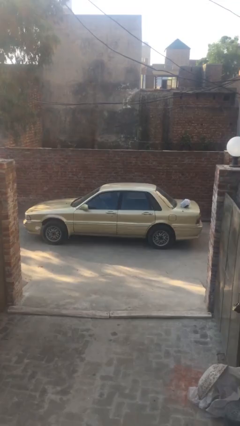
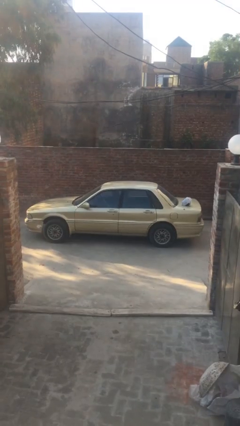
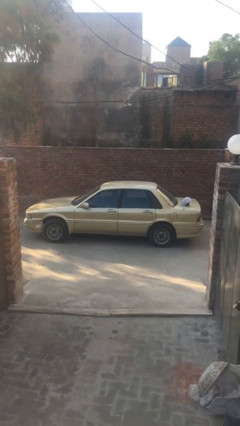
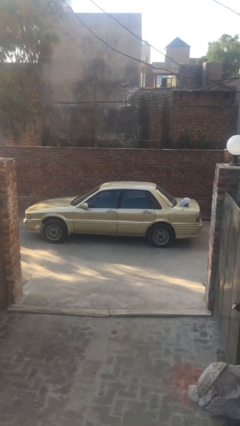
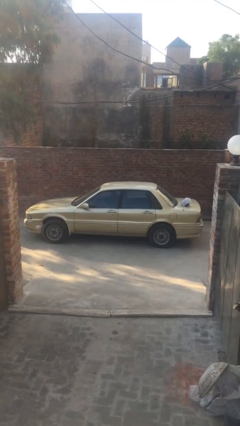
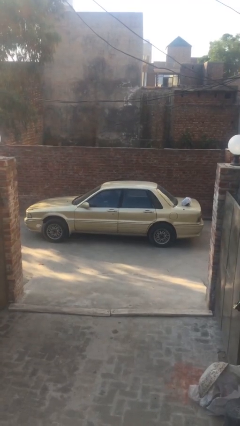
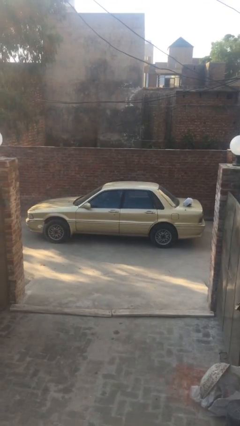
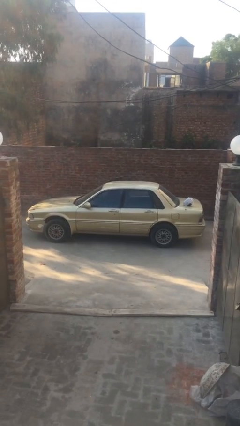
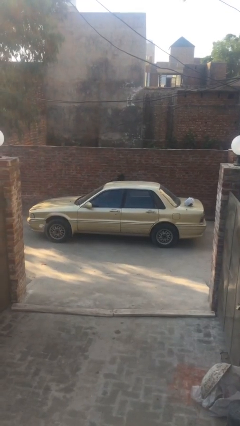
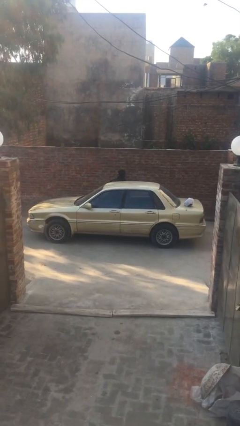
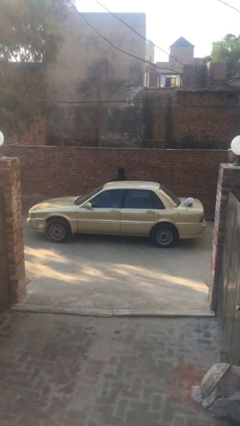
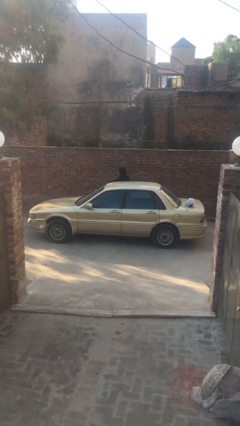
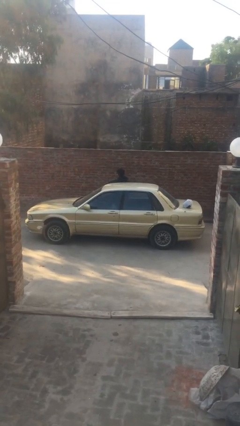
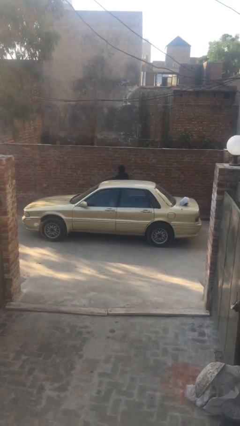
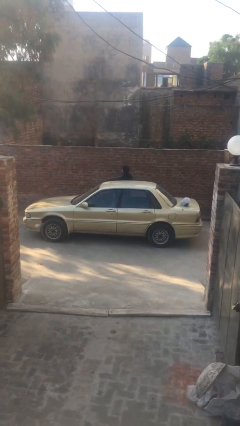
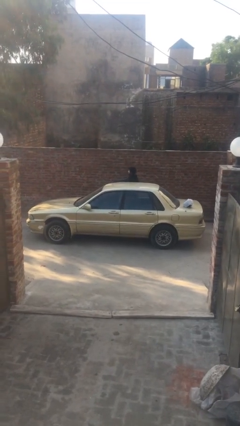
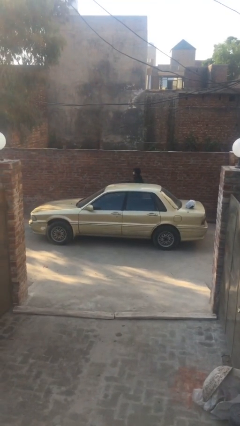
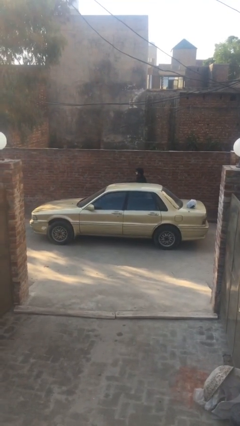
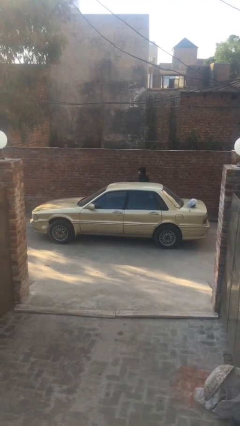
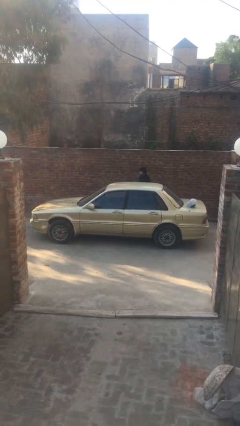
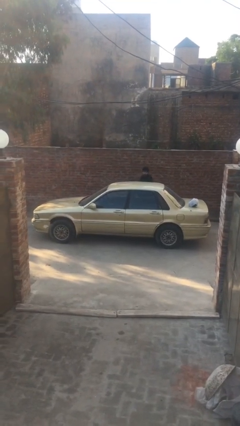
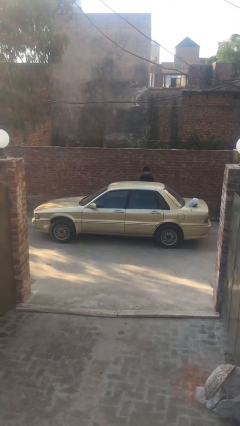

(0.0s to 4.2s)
car drops off person

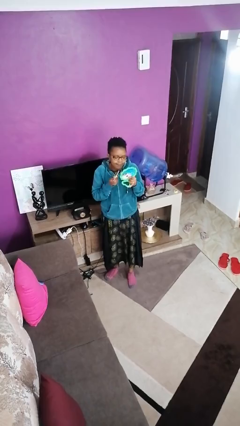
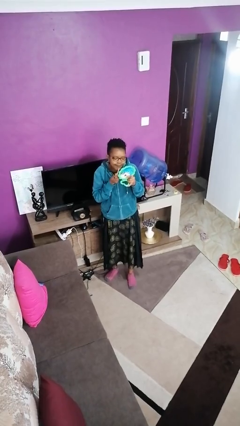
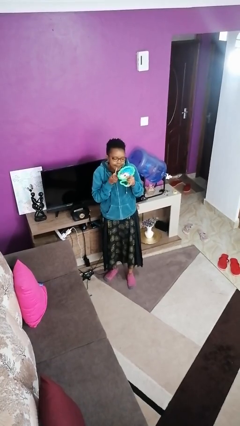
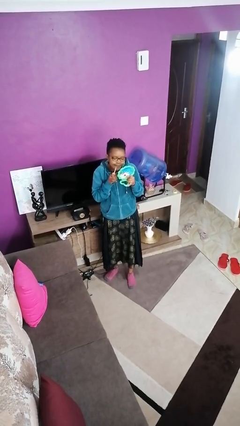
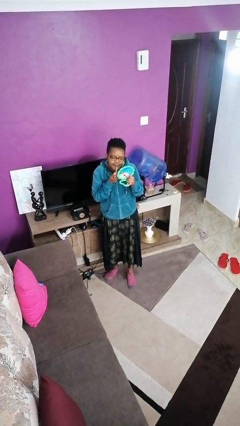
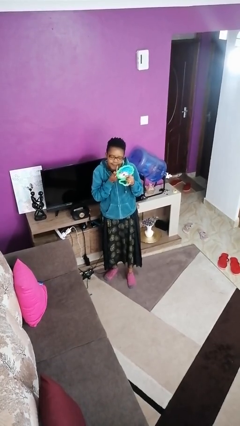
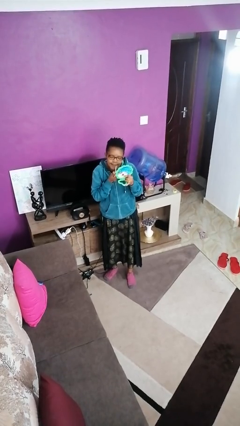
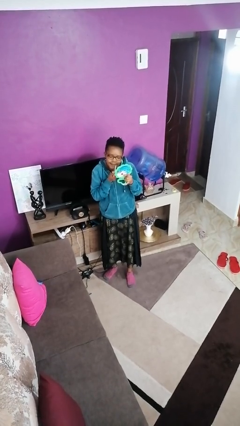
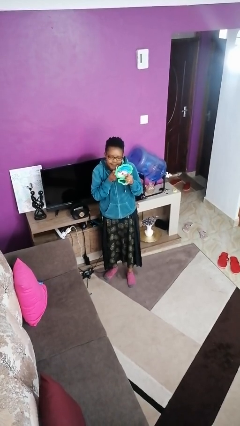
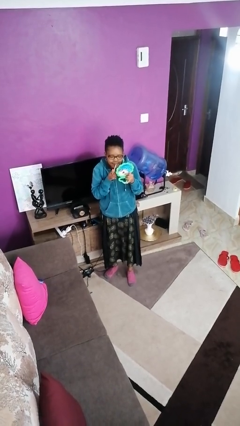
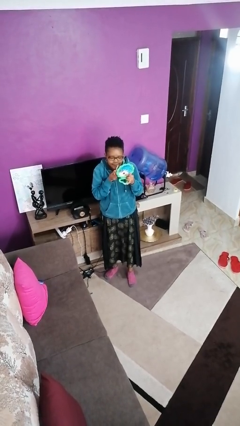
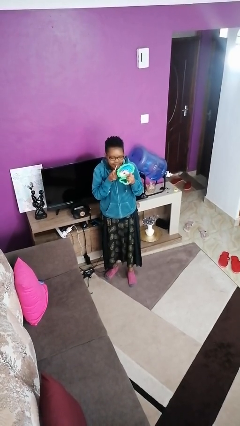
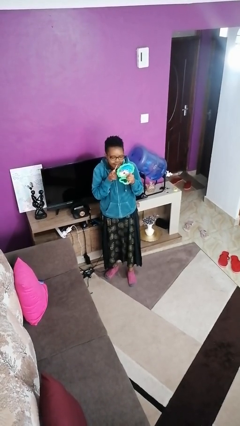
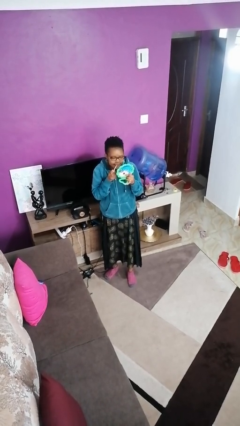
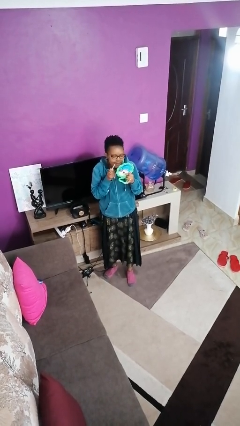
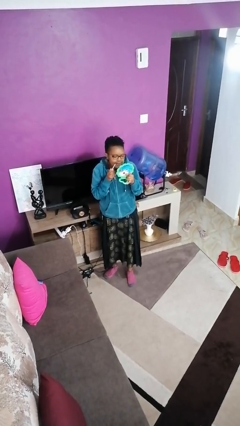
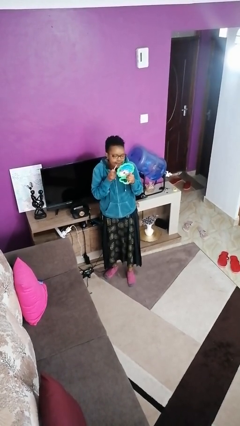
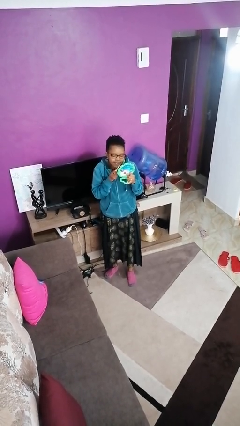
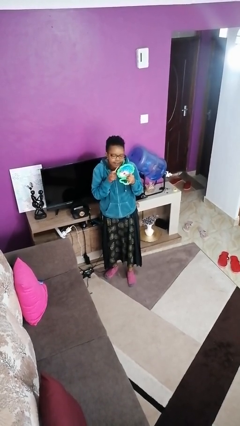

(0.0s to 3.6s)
person applies lip makeup

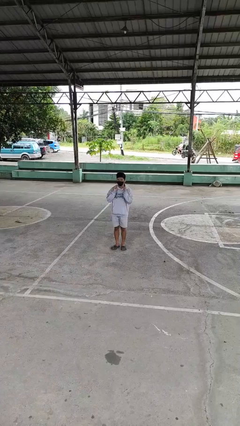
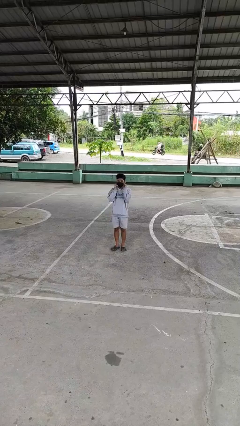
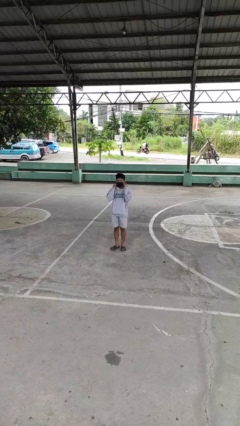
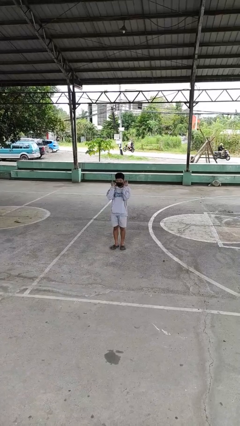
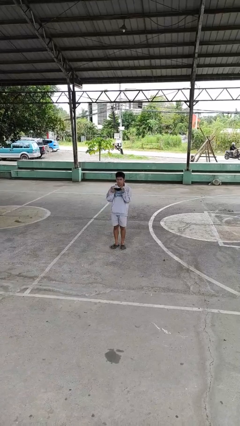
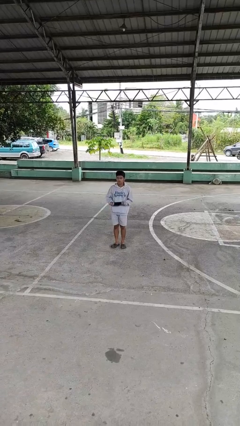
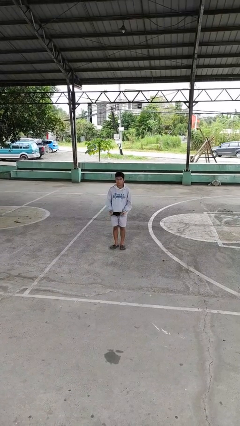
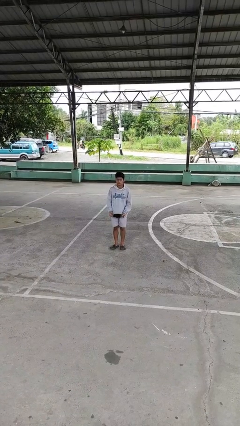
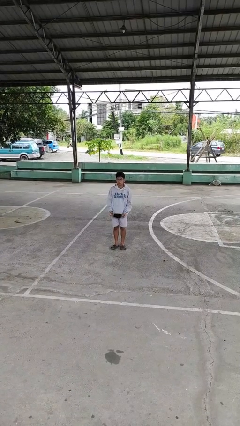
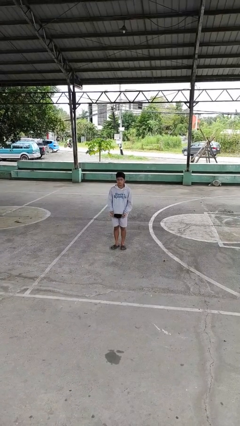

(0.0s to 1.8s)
person takes off facemask

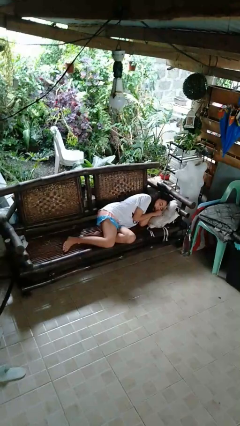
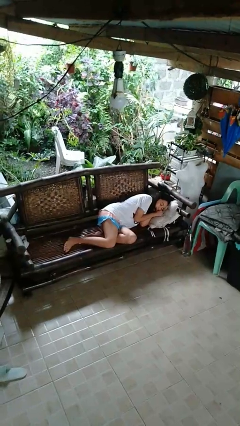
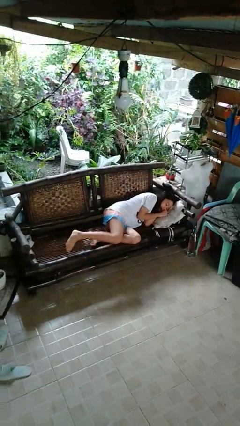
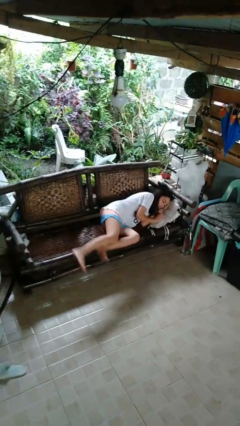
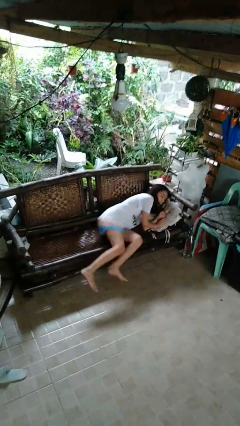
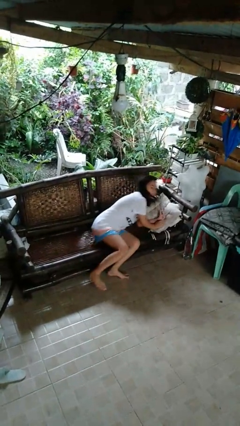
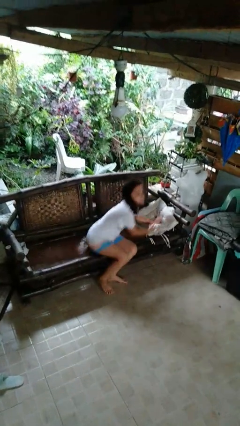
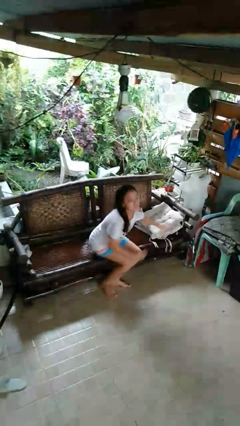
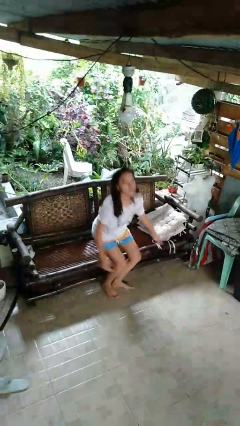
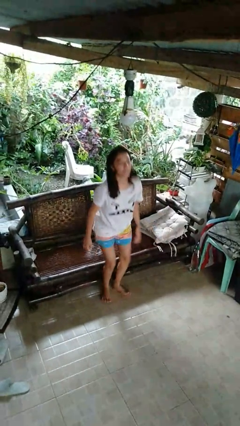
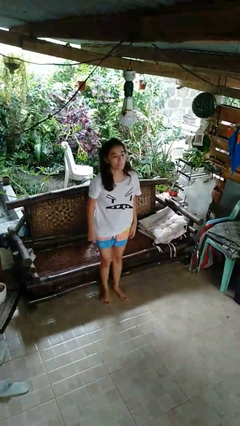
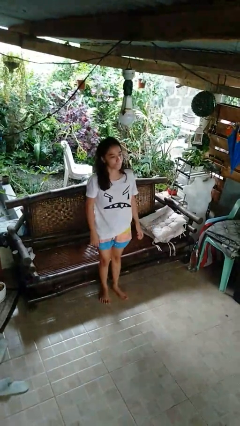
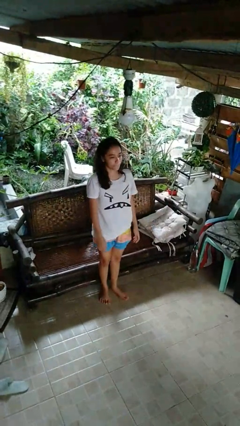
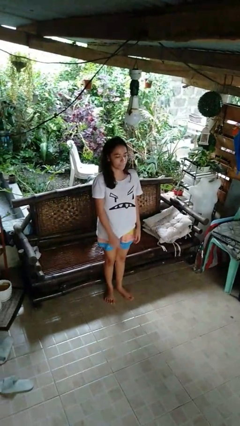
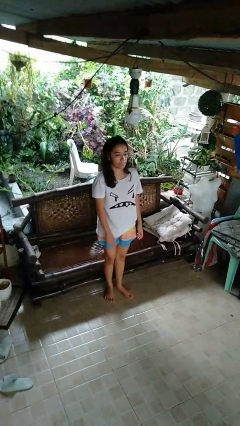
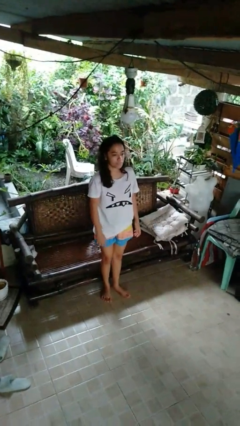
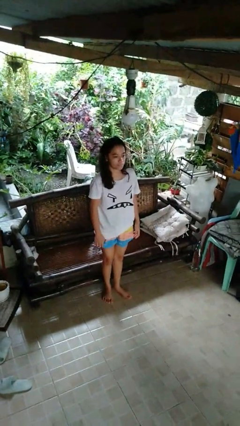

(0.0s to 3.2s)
person stands up

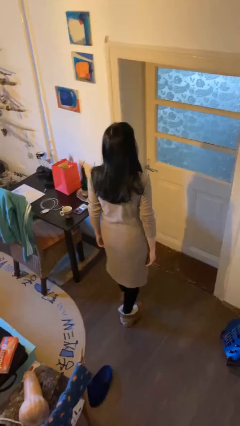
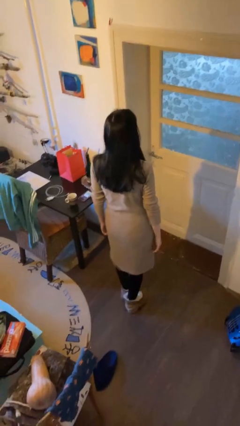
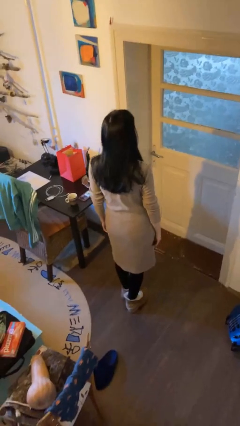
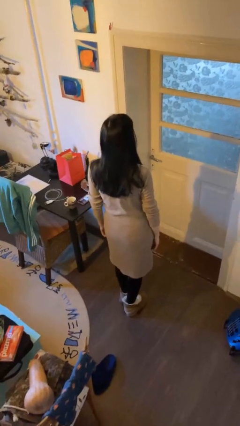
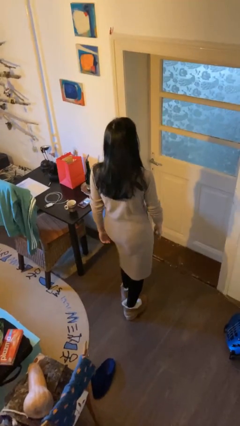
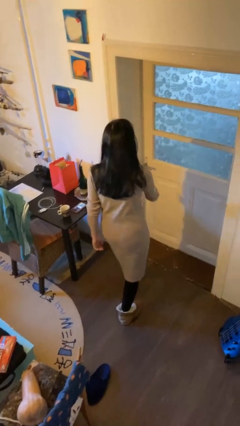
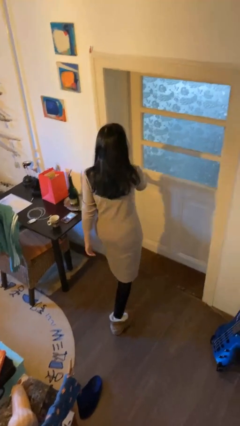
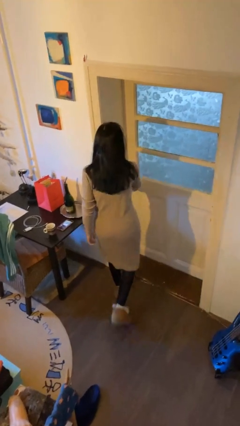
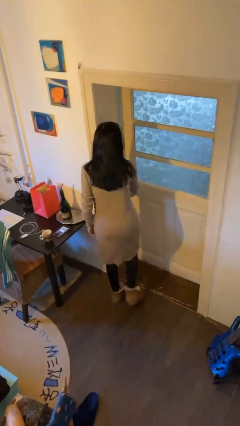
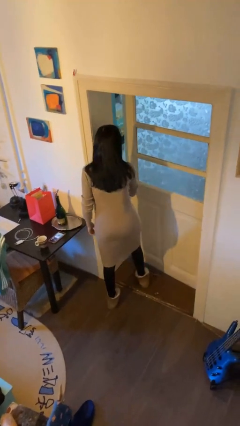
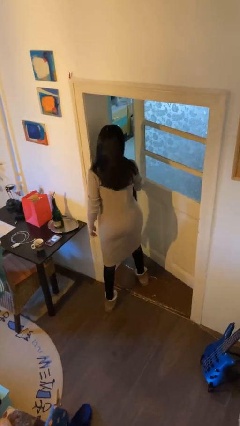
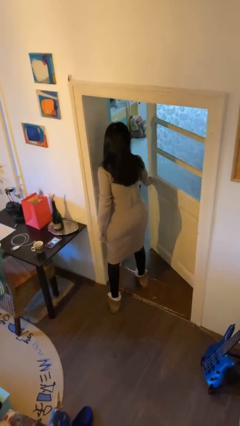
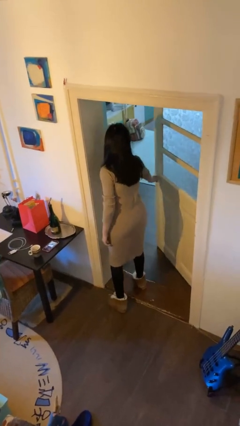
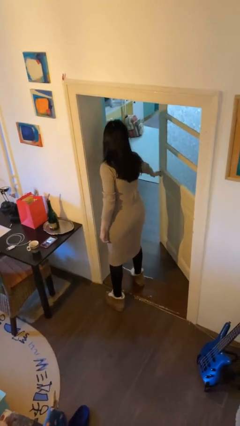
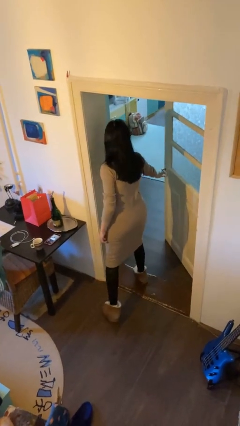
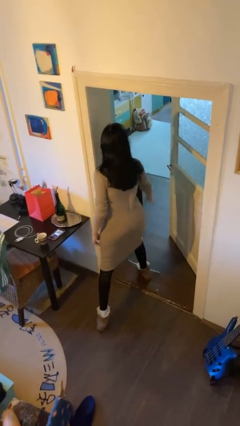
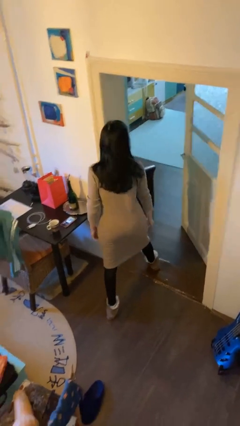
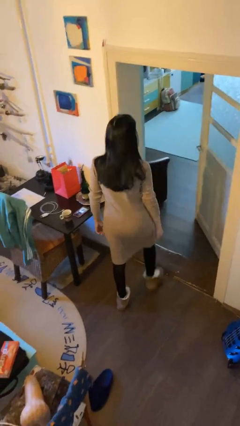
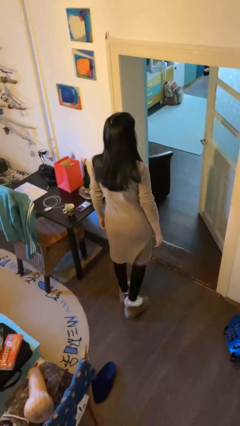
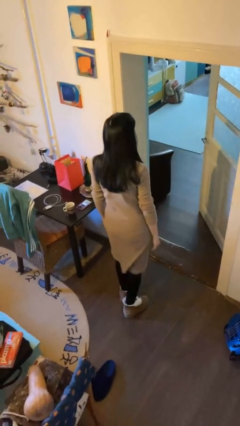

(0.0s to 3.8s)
person opens facility door

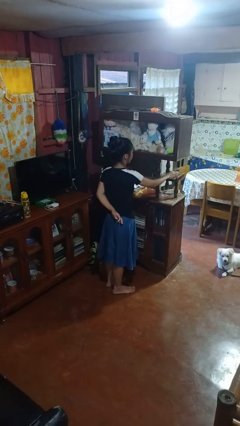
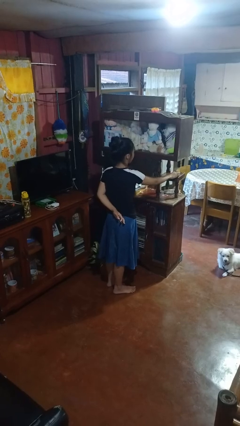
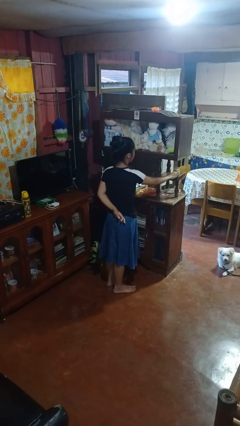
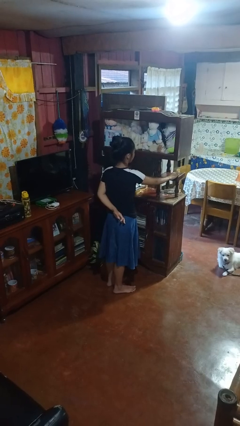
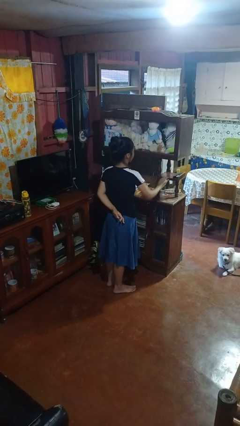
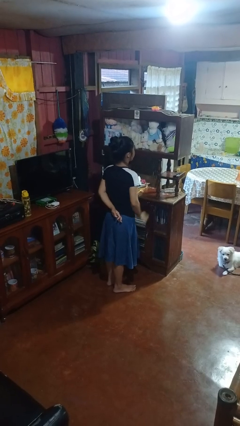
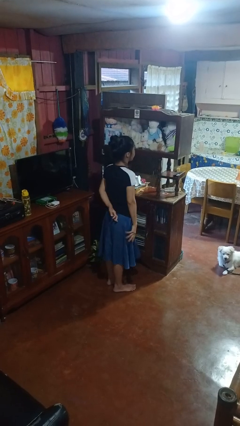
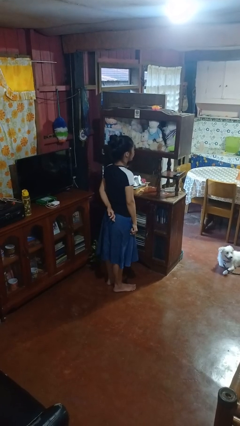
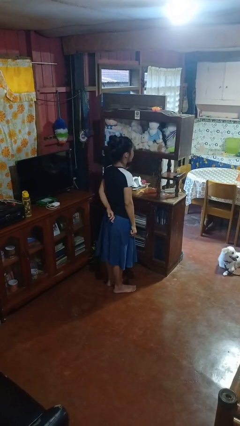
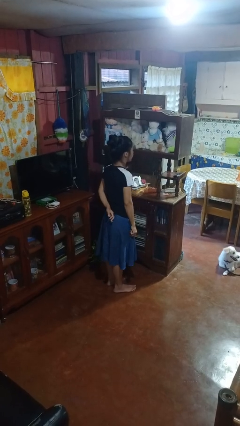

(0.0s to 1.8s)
person puts down object on shelf
